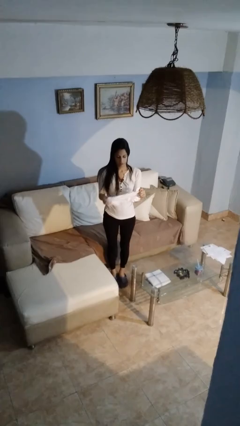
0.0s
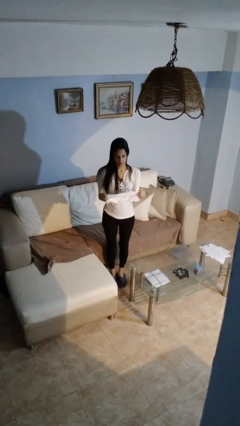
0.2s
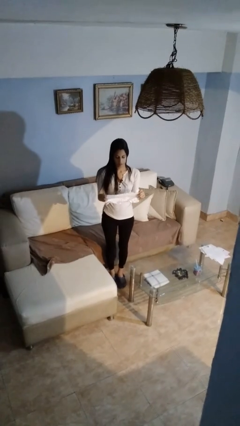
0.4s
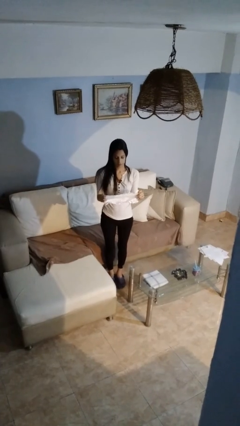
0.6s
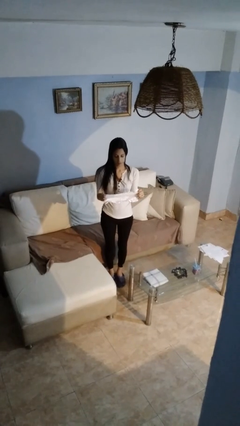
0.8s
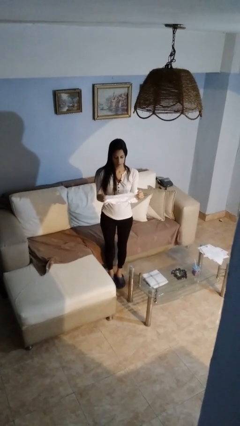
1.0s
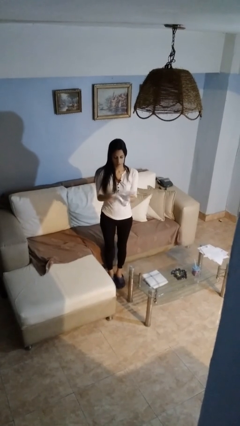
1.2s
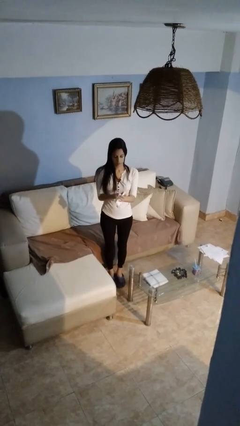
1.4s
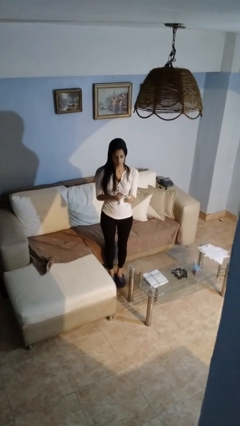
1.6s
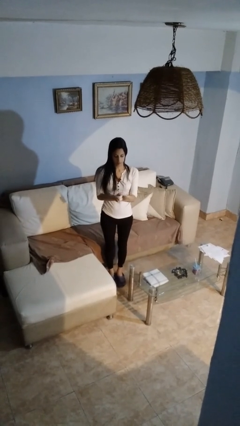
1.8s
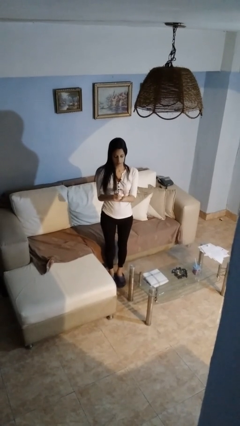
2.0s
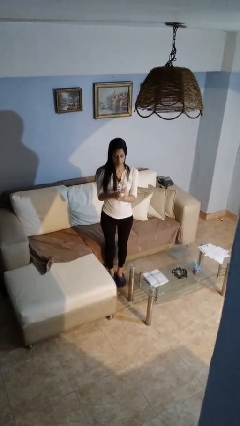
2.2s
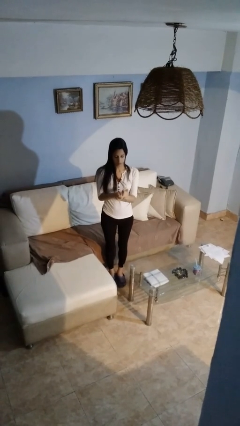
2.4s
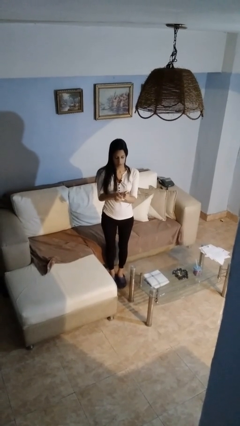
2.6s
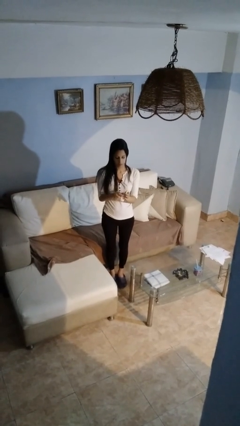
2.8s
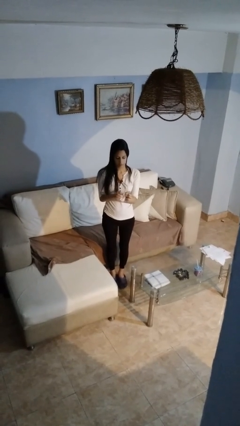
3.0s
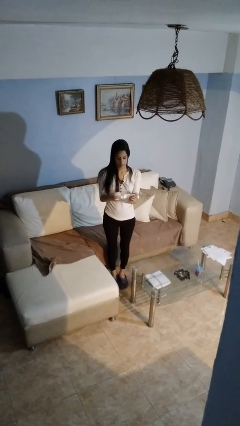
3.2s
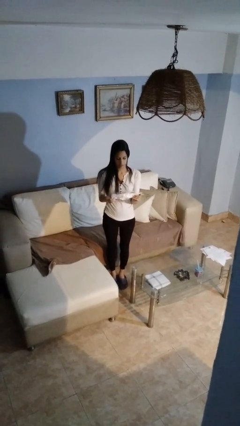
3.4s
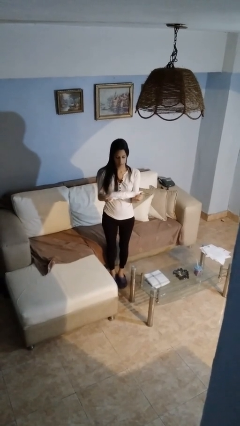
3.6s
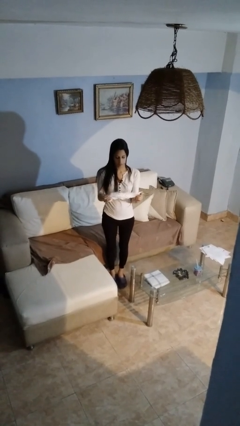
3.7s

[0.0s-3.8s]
person crumples paper

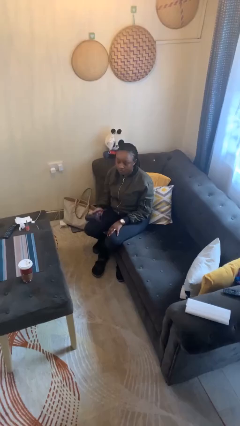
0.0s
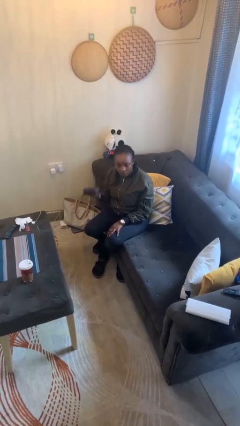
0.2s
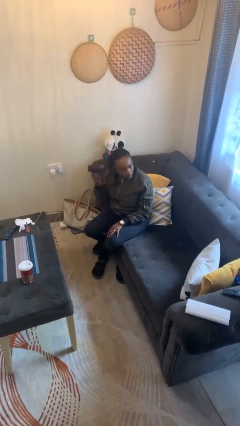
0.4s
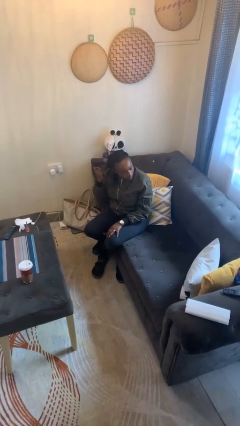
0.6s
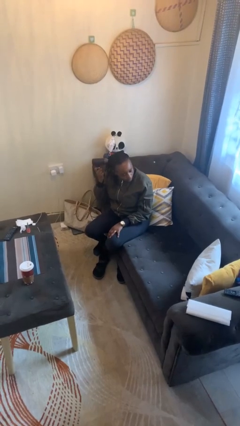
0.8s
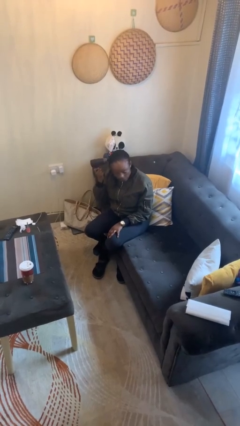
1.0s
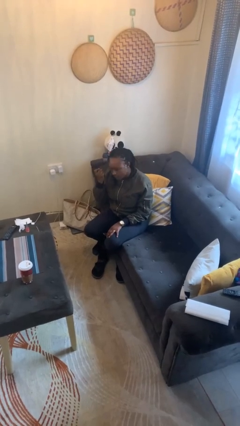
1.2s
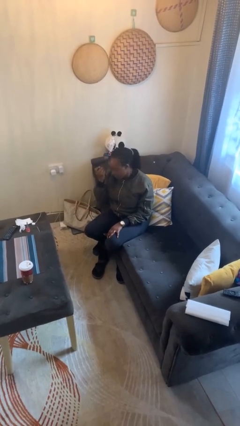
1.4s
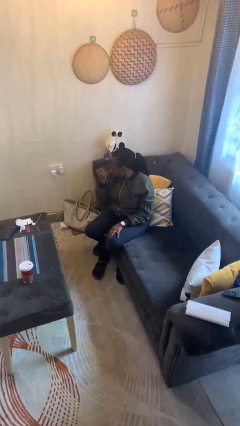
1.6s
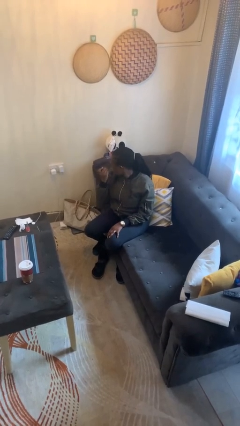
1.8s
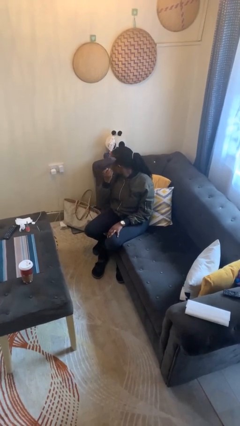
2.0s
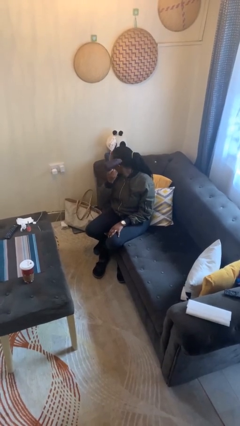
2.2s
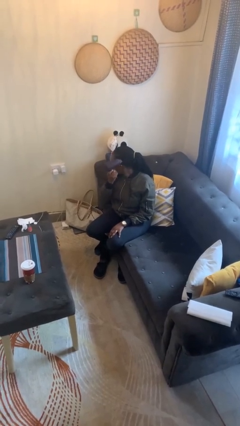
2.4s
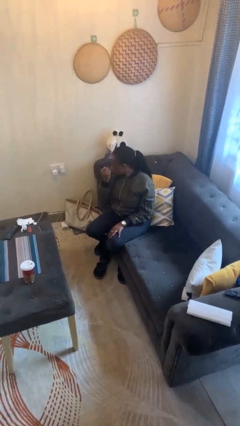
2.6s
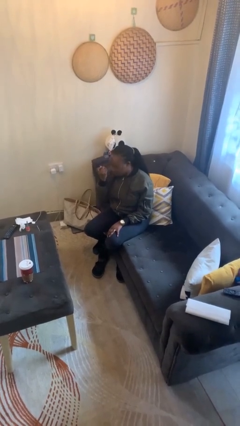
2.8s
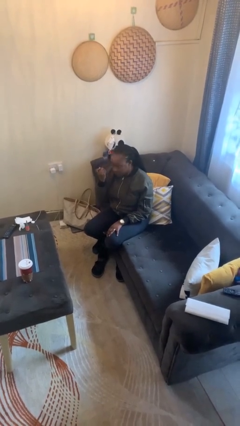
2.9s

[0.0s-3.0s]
person dries hair with hairdryer

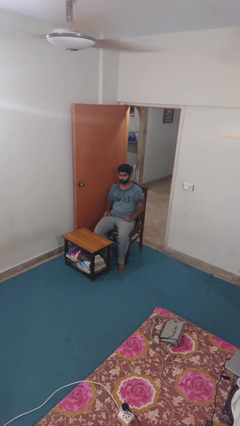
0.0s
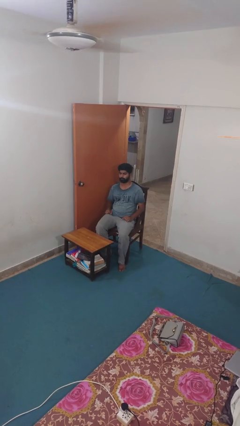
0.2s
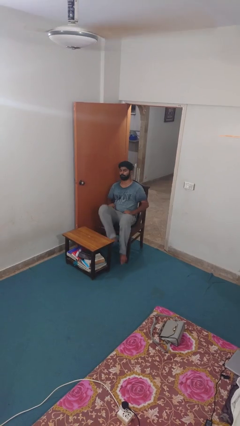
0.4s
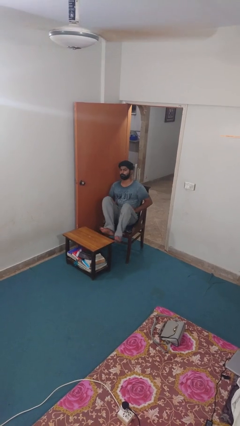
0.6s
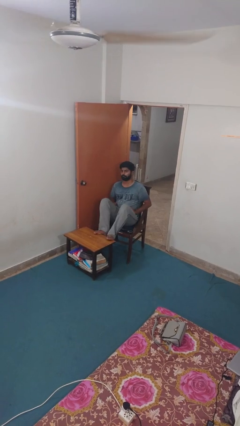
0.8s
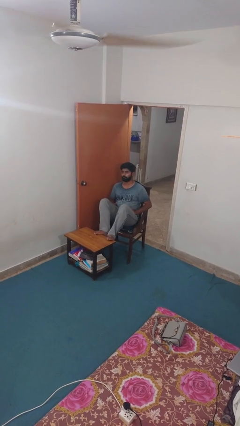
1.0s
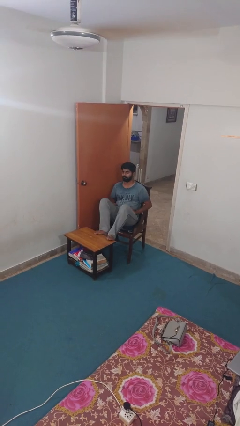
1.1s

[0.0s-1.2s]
person puts feet up

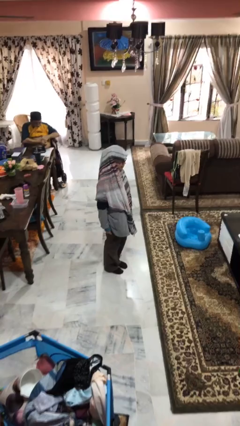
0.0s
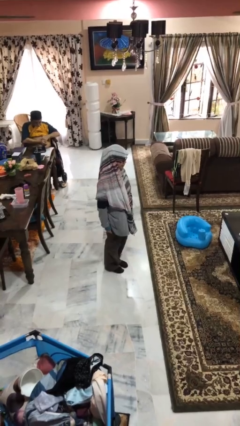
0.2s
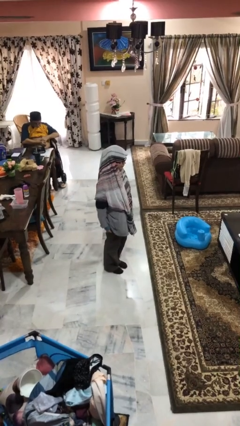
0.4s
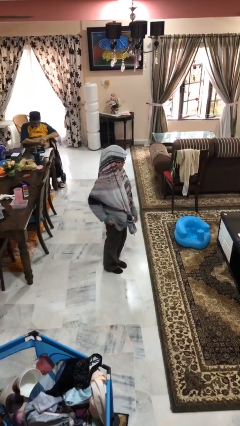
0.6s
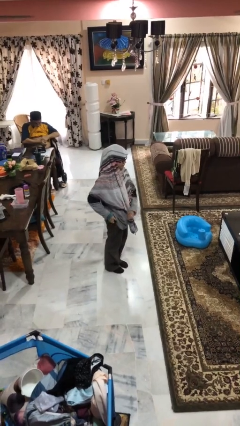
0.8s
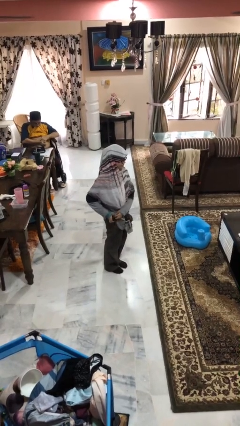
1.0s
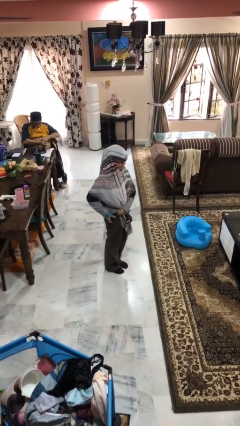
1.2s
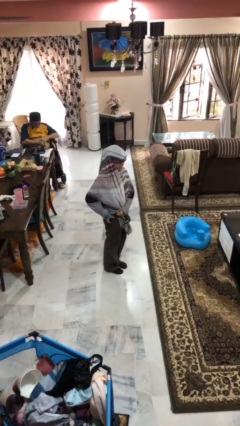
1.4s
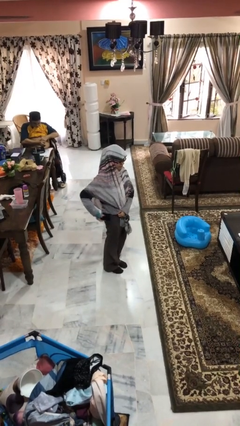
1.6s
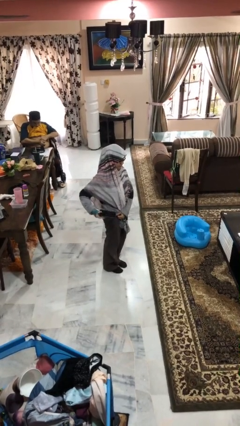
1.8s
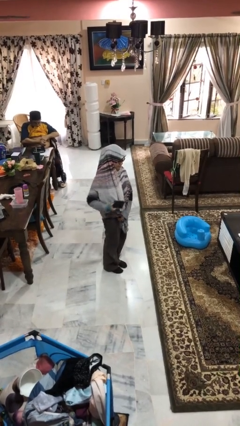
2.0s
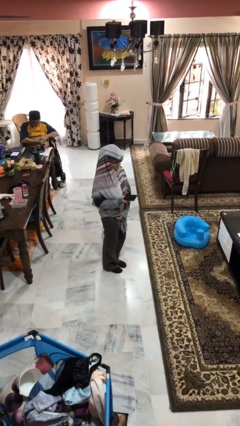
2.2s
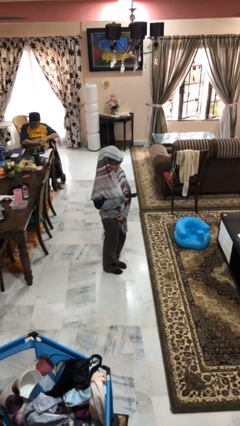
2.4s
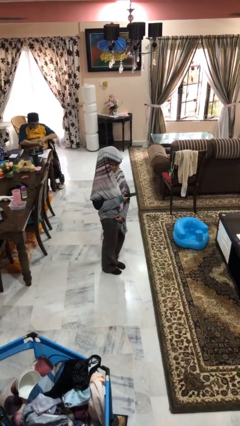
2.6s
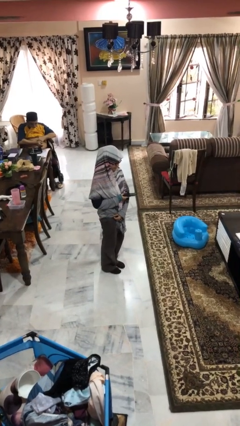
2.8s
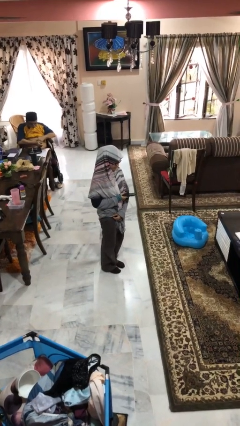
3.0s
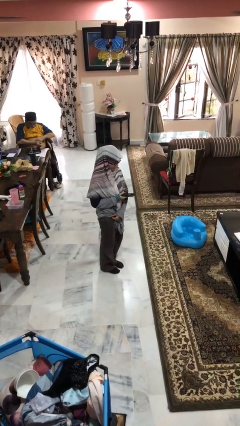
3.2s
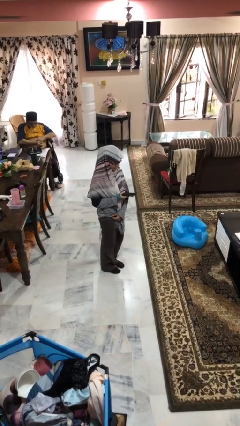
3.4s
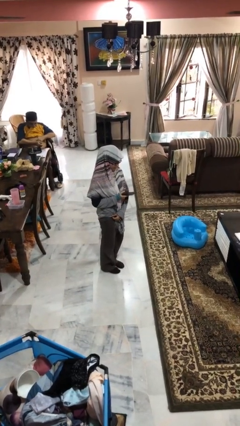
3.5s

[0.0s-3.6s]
person takes phone from pocket

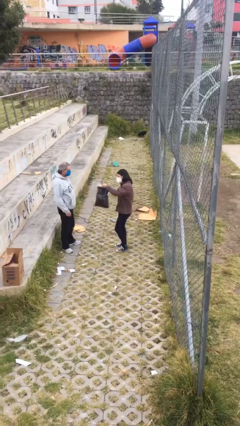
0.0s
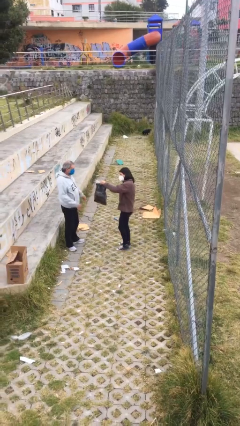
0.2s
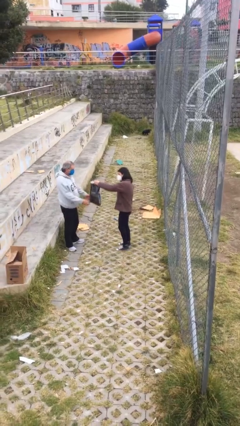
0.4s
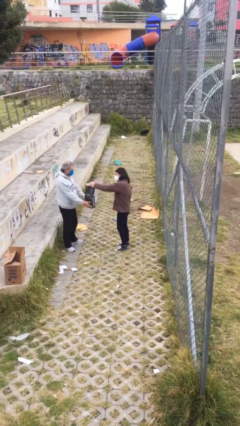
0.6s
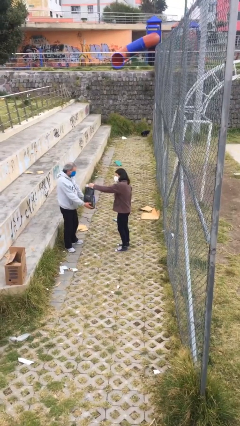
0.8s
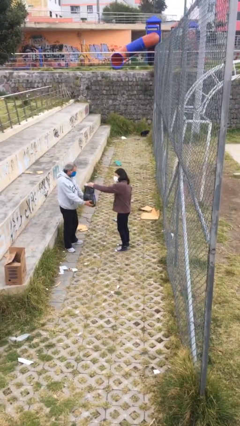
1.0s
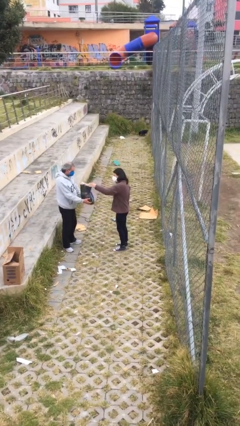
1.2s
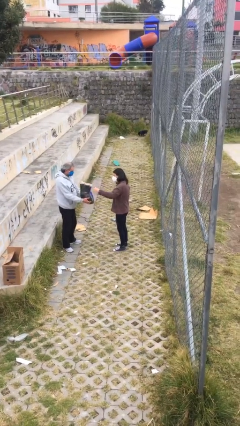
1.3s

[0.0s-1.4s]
person transfers object to person

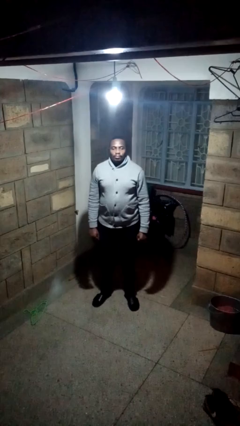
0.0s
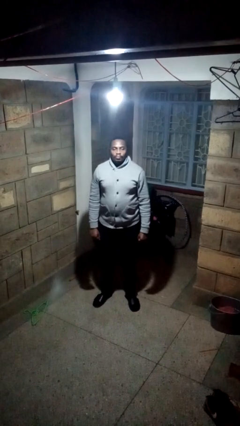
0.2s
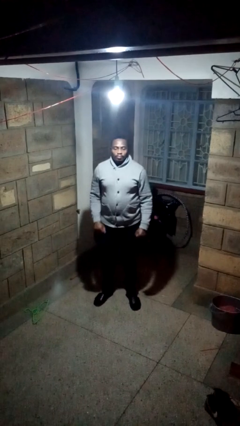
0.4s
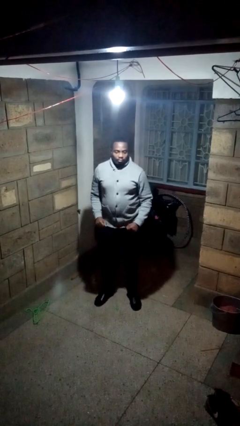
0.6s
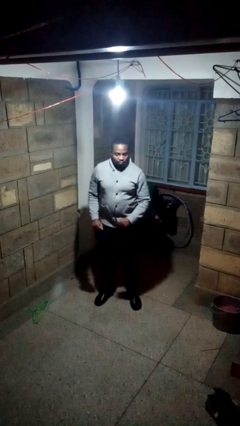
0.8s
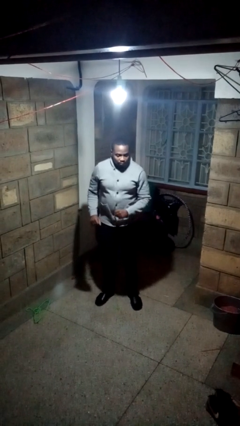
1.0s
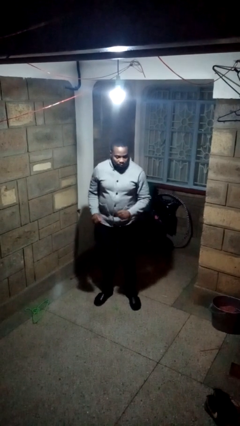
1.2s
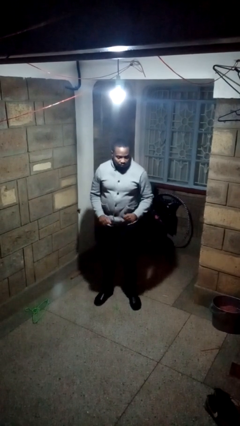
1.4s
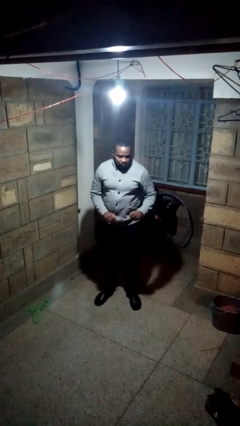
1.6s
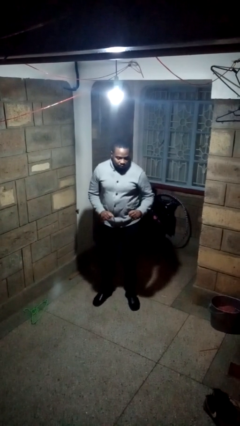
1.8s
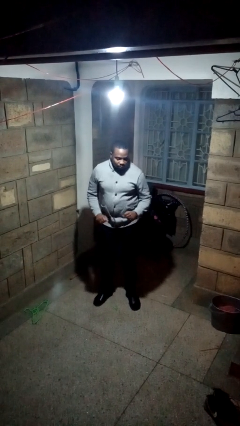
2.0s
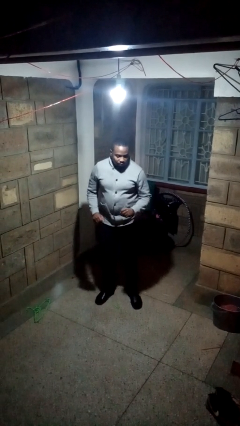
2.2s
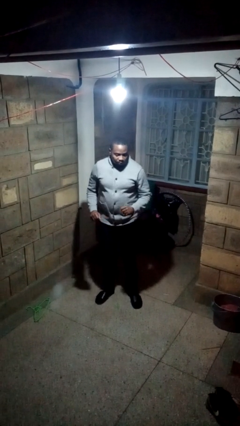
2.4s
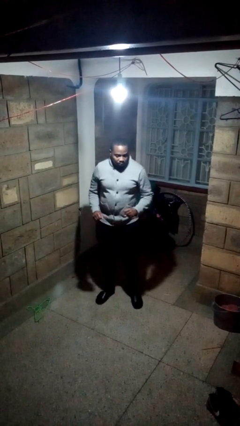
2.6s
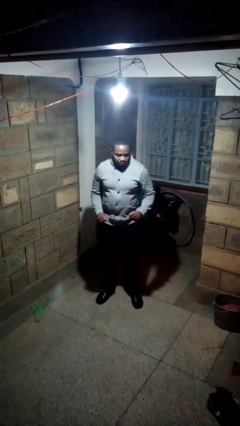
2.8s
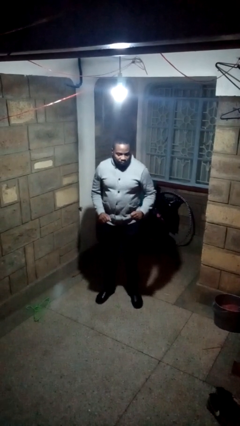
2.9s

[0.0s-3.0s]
person dances in place

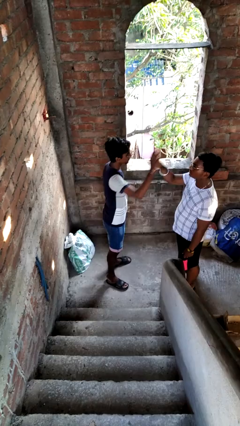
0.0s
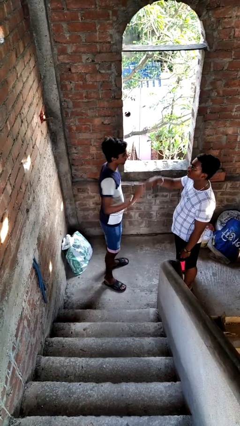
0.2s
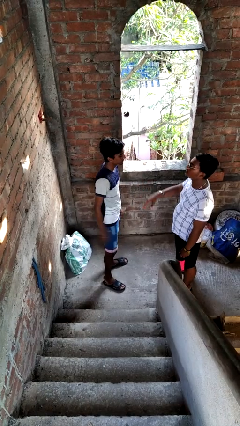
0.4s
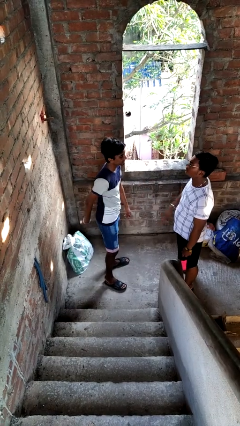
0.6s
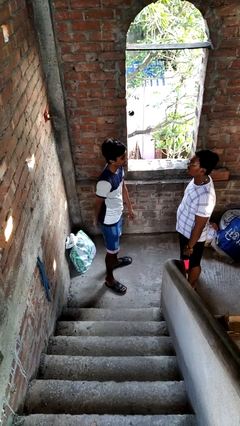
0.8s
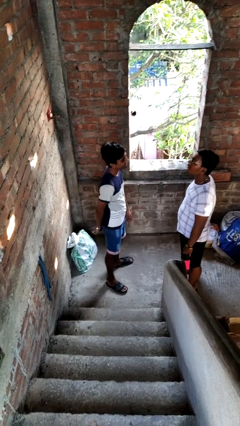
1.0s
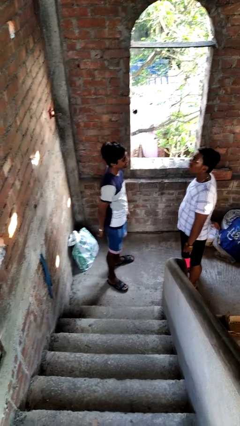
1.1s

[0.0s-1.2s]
person highfives hand
